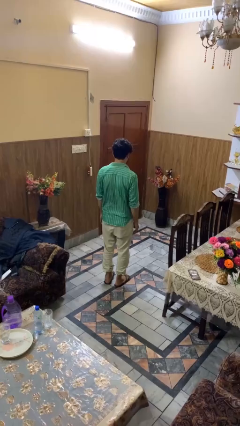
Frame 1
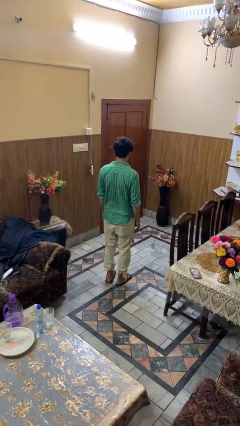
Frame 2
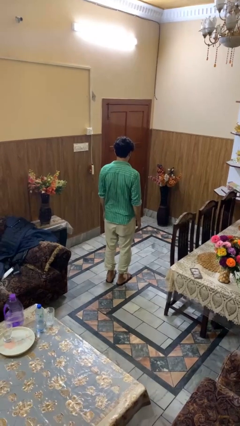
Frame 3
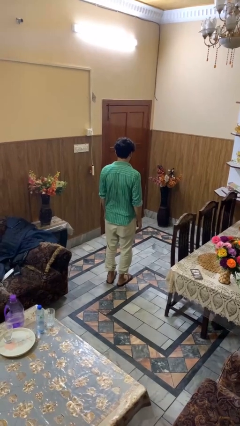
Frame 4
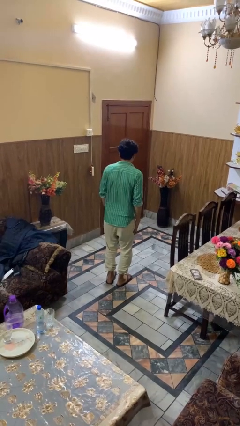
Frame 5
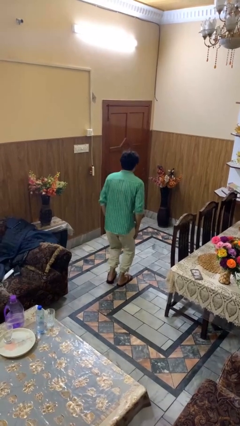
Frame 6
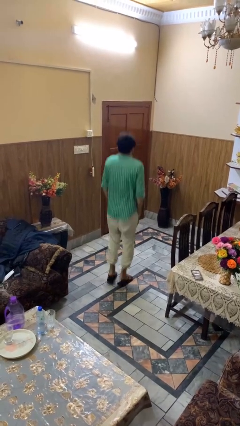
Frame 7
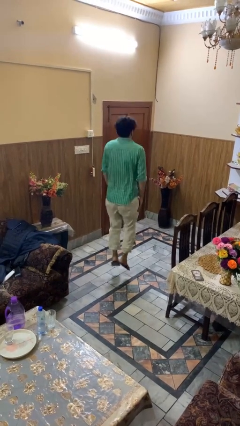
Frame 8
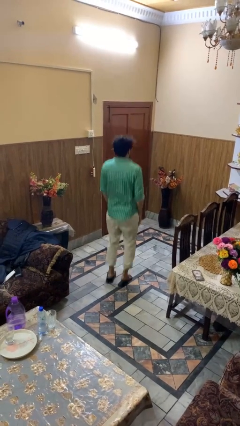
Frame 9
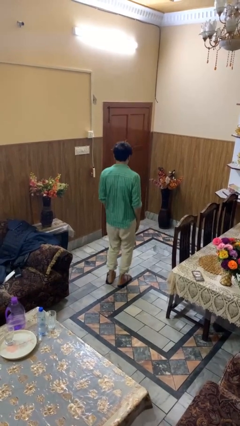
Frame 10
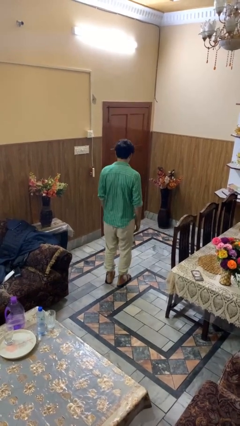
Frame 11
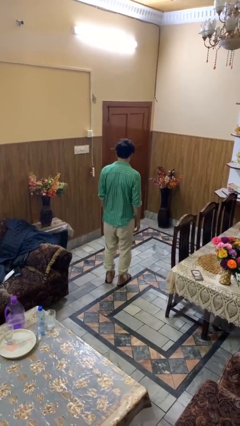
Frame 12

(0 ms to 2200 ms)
person jumps

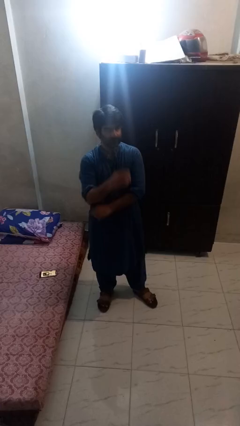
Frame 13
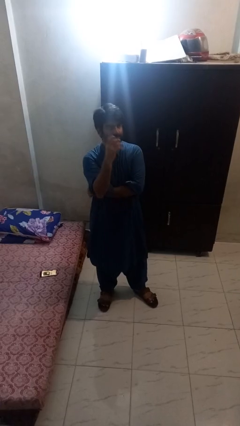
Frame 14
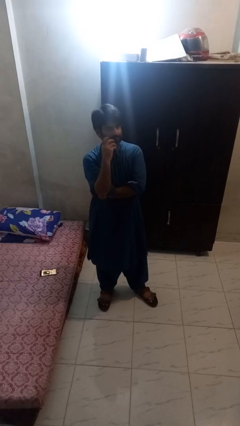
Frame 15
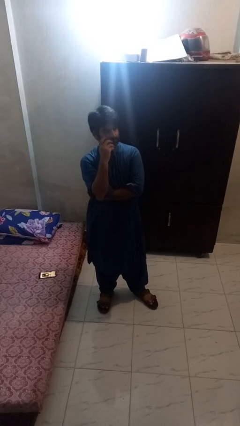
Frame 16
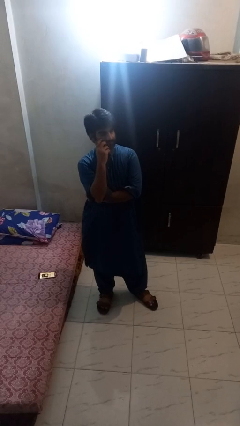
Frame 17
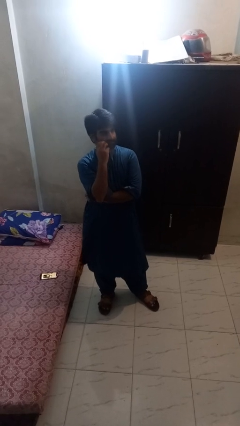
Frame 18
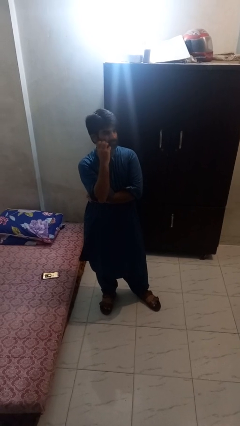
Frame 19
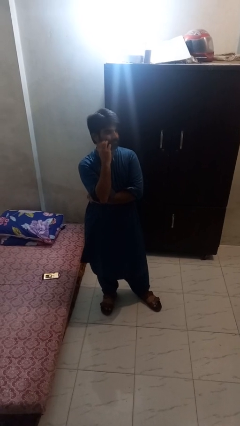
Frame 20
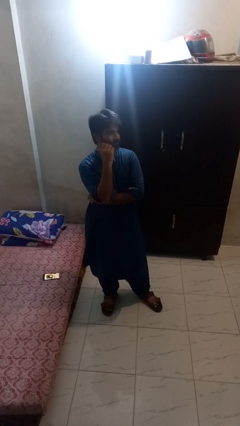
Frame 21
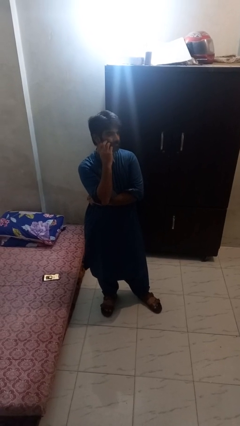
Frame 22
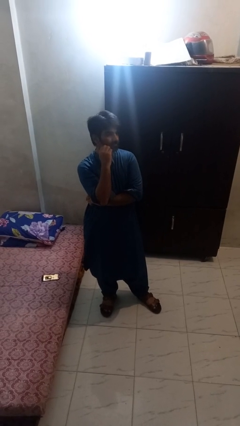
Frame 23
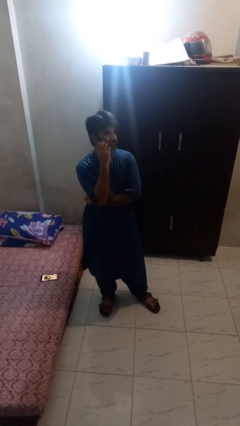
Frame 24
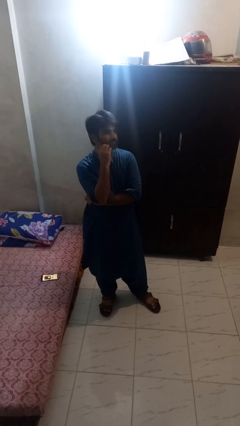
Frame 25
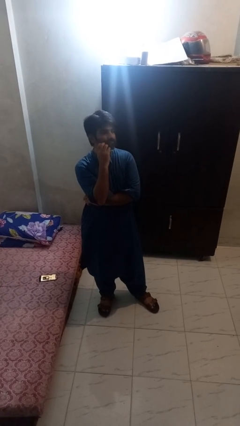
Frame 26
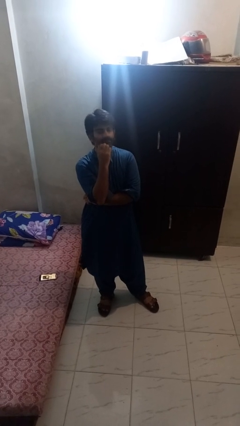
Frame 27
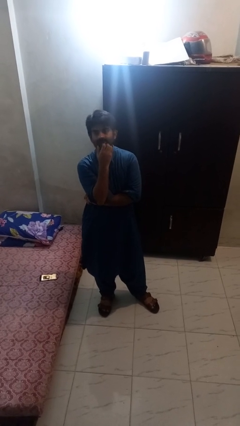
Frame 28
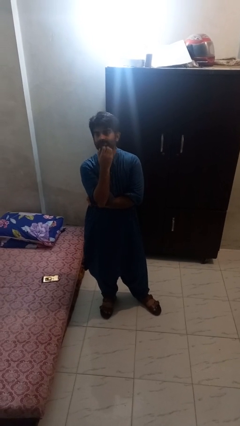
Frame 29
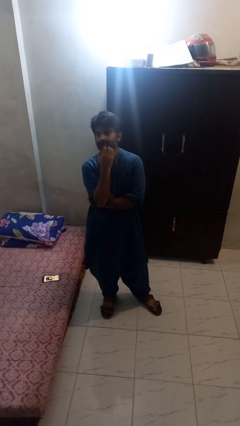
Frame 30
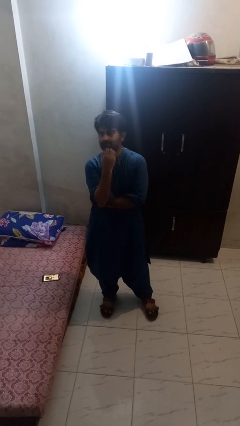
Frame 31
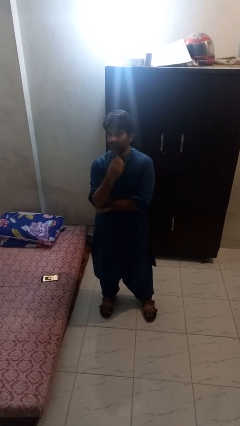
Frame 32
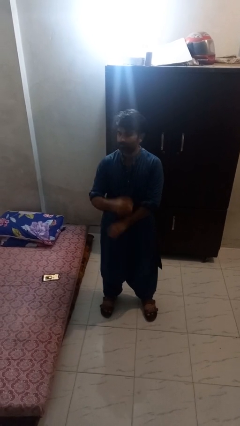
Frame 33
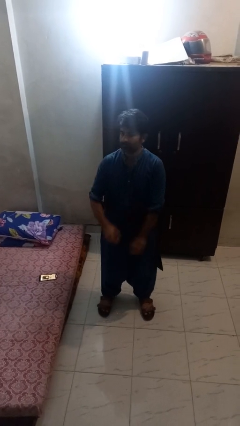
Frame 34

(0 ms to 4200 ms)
person scratches face

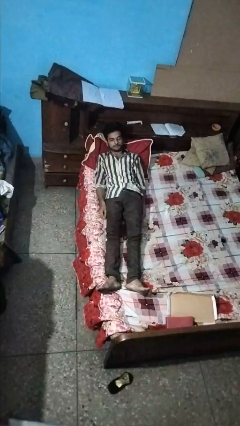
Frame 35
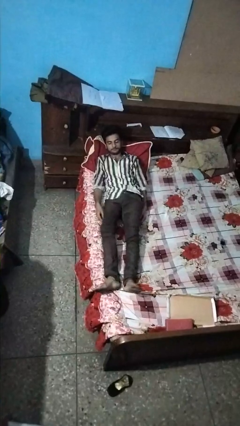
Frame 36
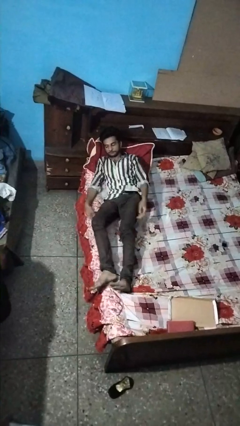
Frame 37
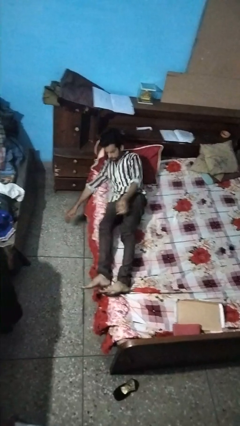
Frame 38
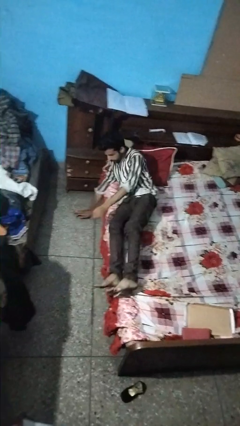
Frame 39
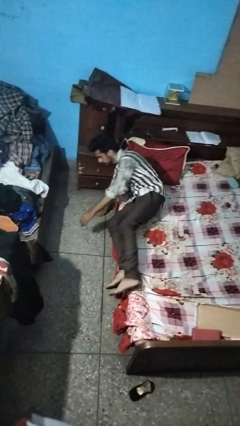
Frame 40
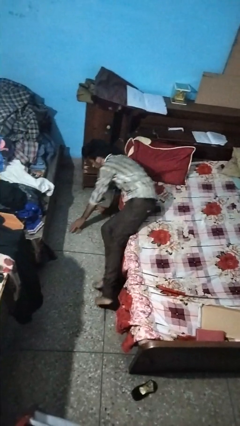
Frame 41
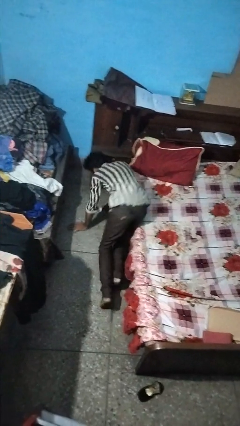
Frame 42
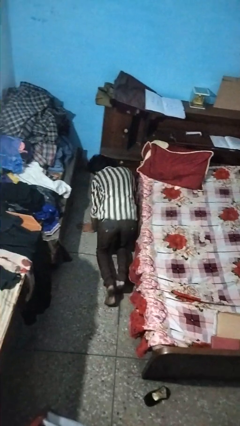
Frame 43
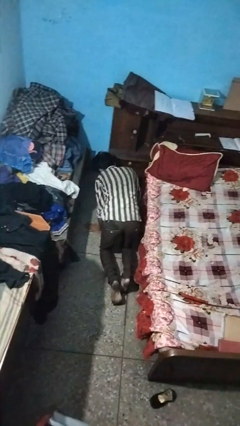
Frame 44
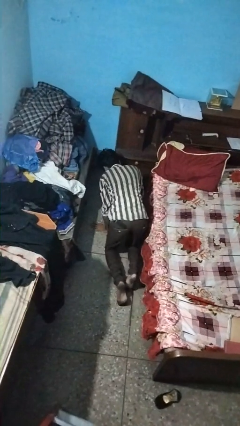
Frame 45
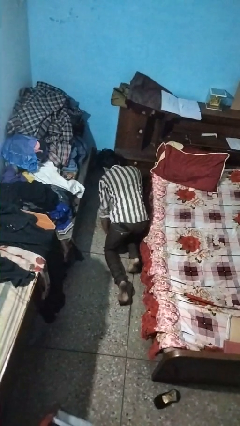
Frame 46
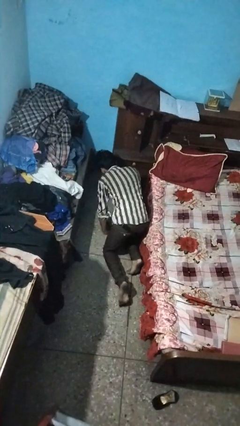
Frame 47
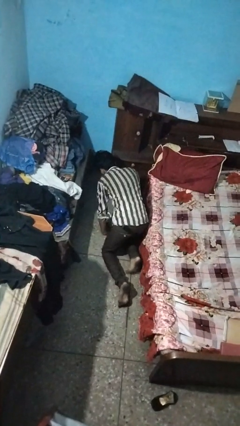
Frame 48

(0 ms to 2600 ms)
person falls from bed

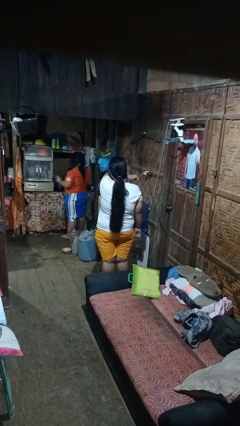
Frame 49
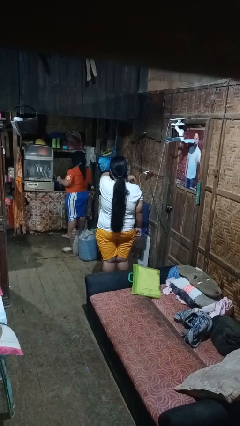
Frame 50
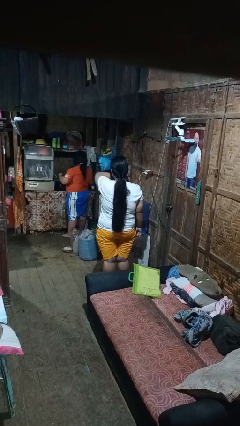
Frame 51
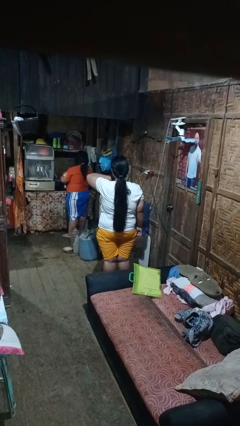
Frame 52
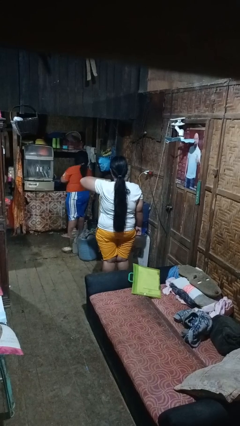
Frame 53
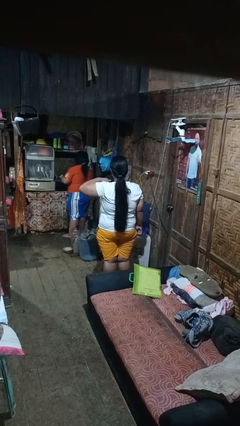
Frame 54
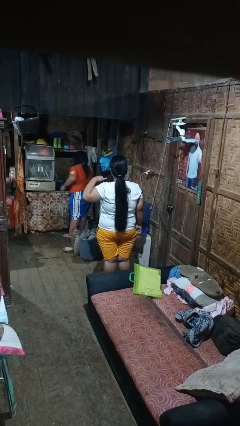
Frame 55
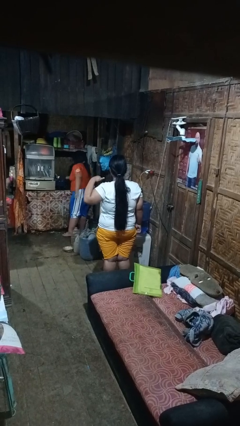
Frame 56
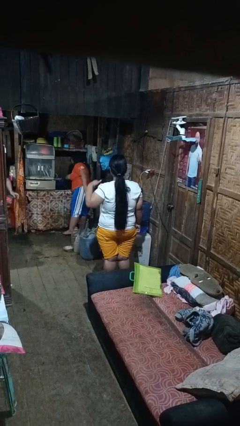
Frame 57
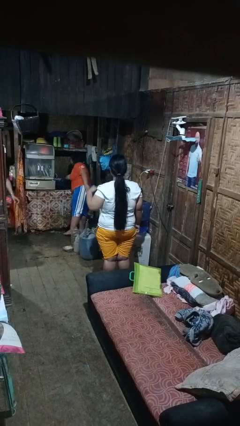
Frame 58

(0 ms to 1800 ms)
person gestures cut

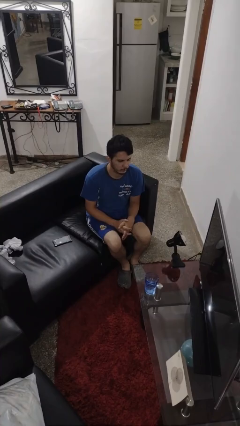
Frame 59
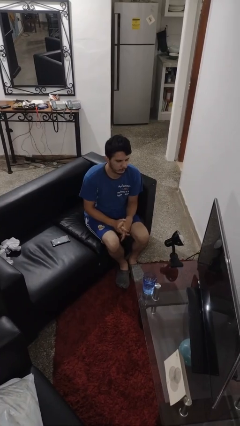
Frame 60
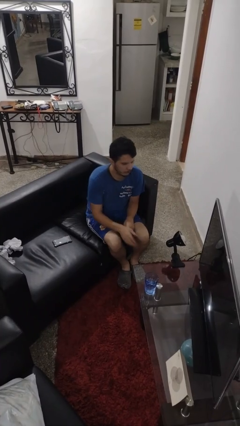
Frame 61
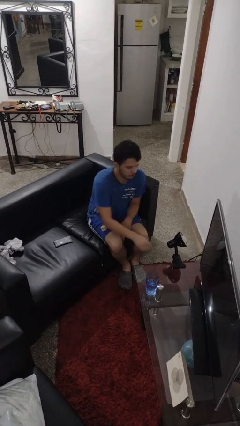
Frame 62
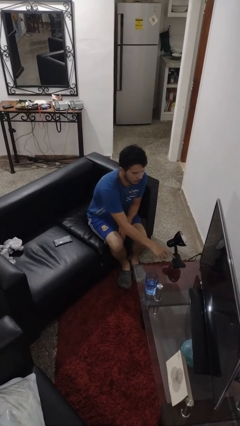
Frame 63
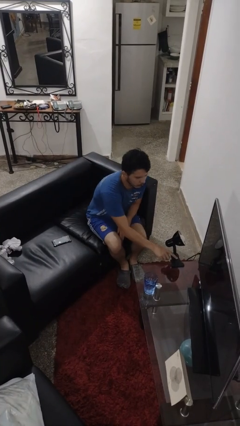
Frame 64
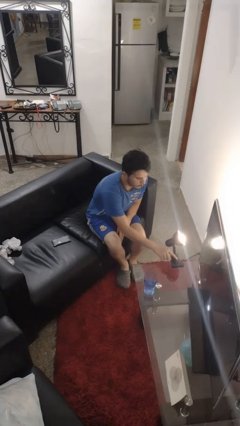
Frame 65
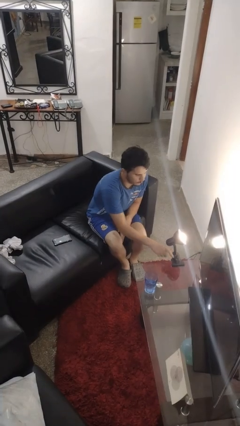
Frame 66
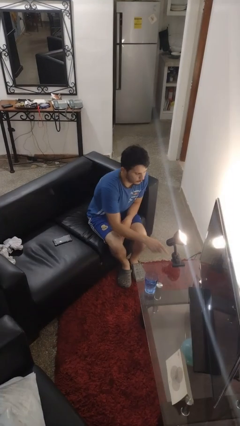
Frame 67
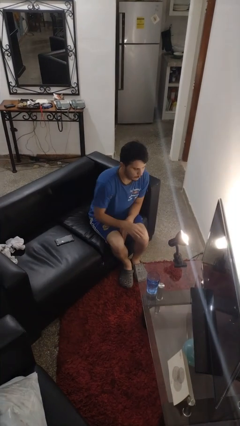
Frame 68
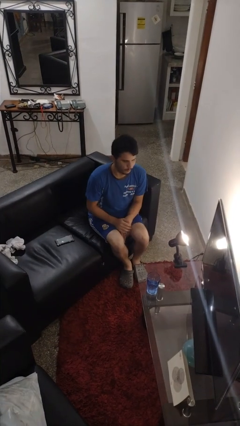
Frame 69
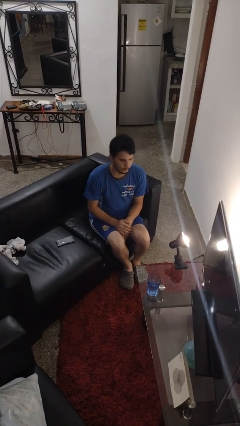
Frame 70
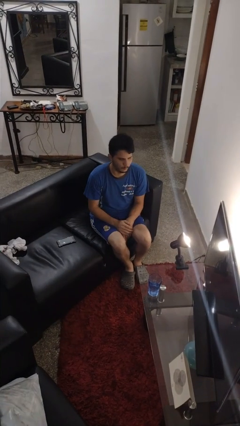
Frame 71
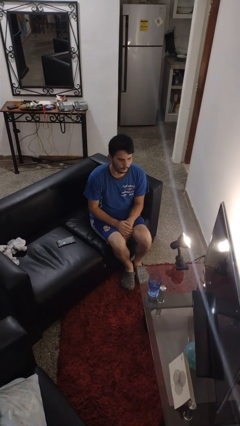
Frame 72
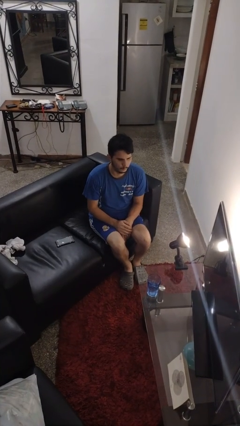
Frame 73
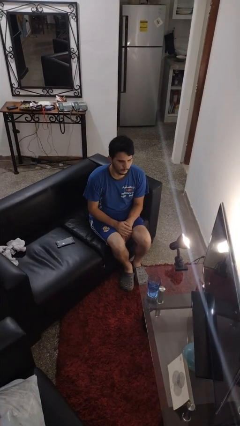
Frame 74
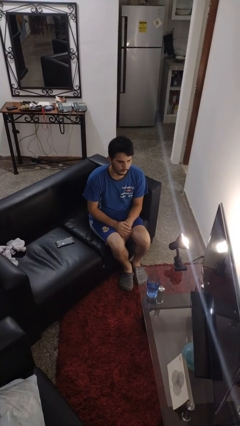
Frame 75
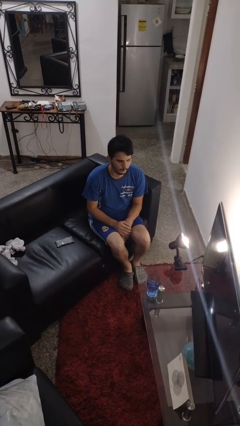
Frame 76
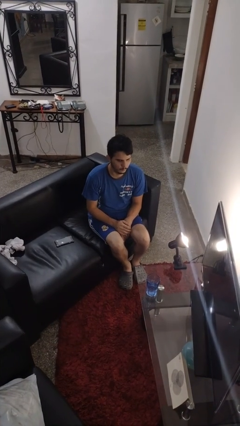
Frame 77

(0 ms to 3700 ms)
person turns on lamp

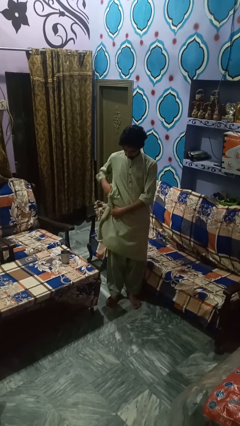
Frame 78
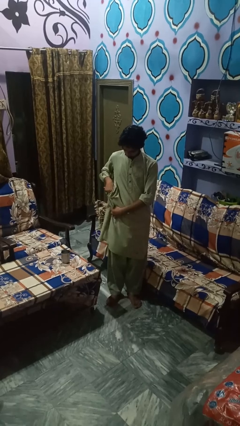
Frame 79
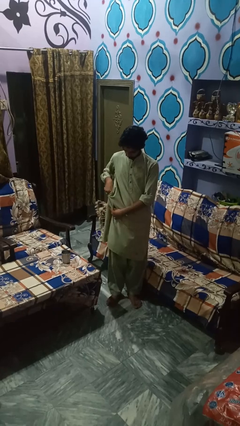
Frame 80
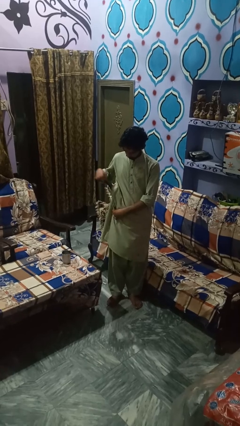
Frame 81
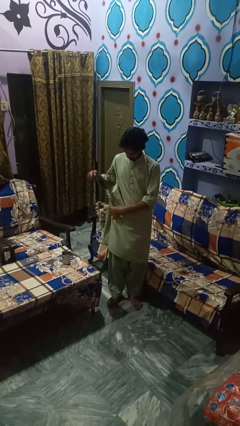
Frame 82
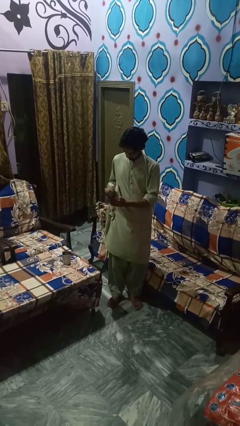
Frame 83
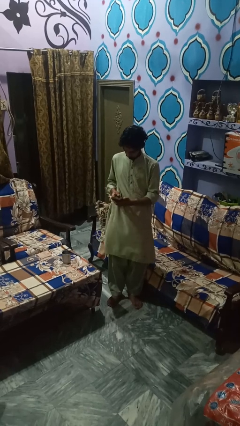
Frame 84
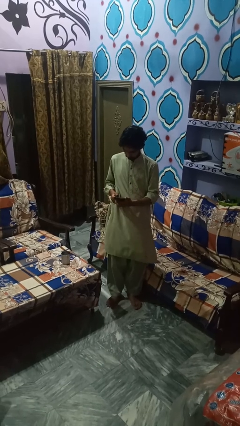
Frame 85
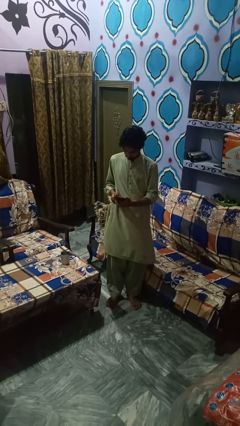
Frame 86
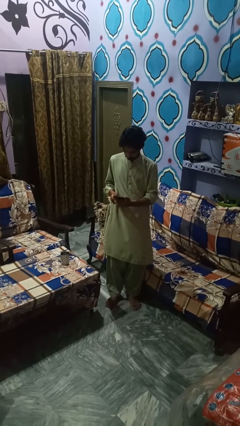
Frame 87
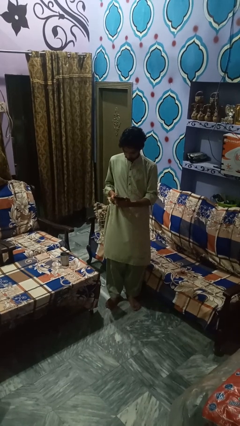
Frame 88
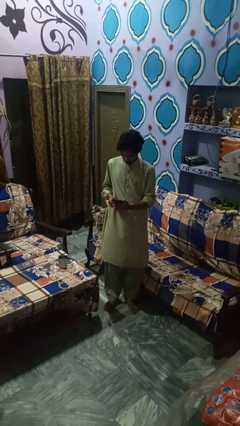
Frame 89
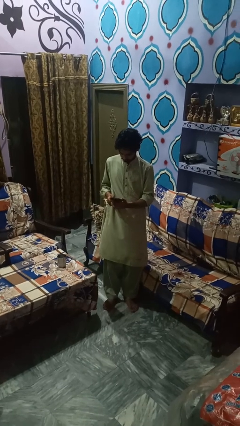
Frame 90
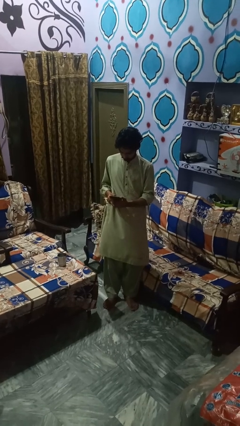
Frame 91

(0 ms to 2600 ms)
person takes phone from pocket
